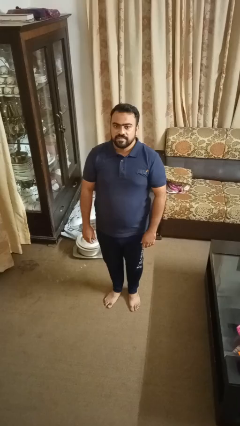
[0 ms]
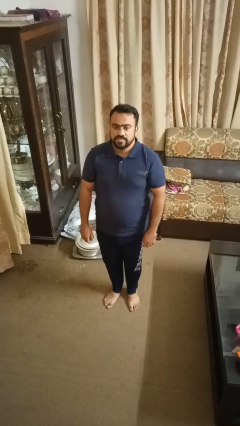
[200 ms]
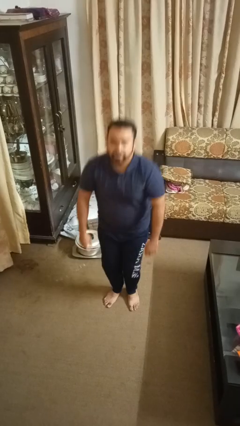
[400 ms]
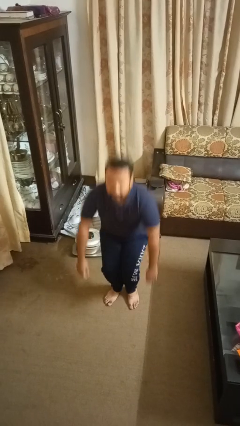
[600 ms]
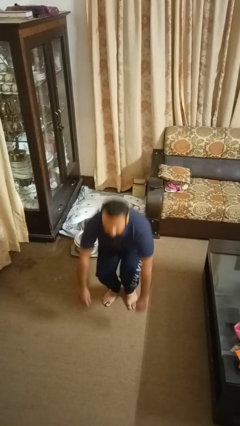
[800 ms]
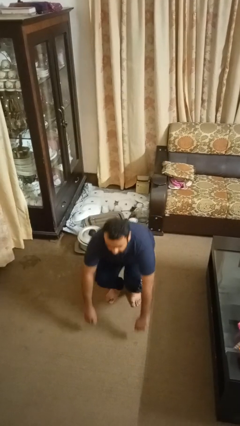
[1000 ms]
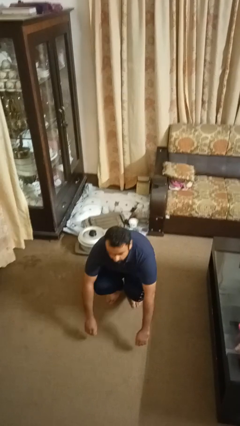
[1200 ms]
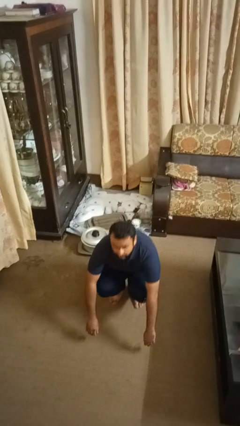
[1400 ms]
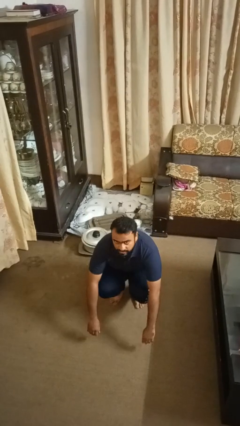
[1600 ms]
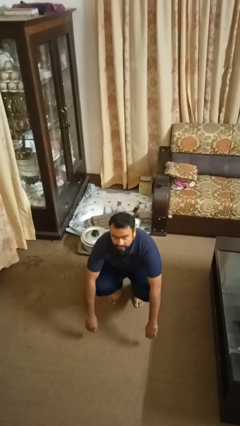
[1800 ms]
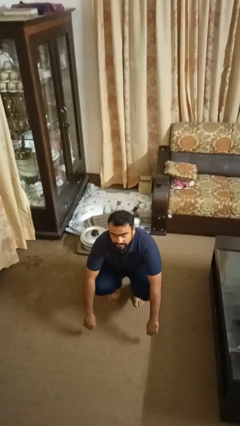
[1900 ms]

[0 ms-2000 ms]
person squats

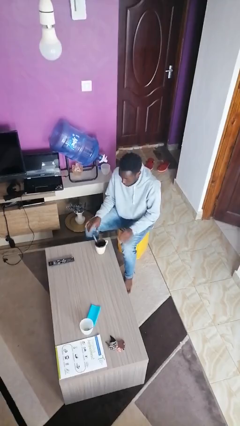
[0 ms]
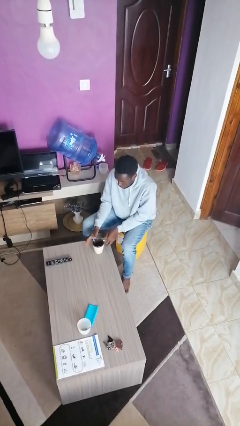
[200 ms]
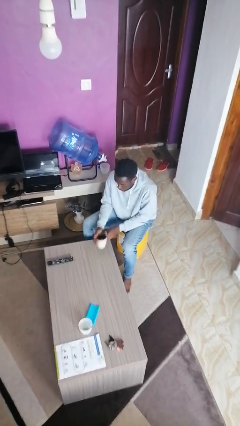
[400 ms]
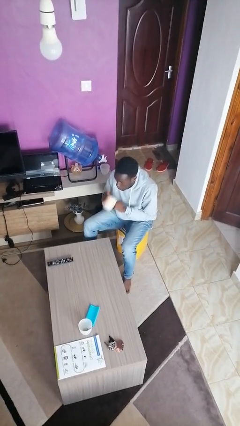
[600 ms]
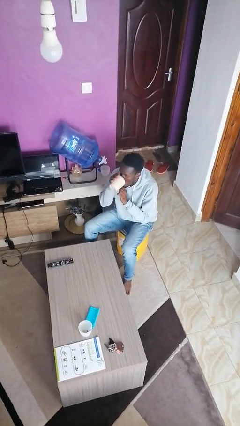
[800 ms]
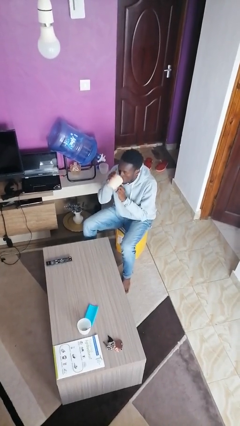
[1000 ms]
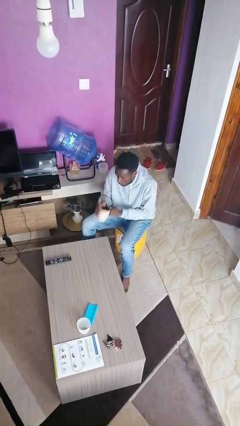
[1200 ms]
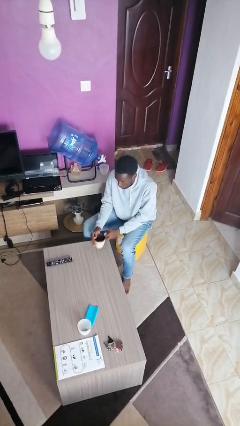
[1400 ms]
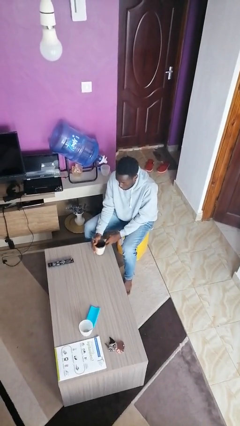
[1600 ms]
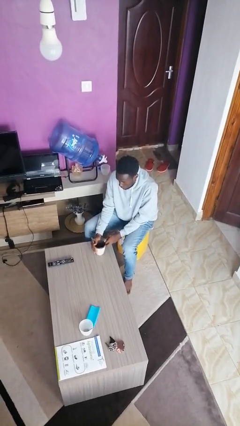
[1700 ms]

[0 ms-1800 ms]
person drinks from mug

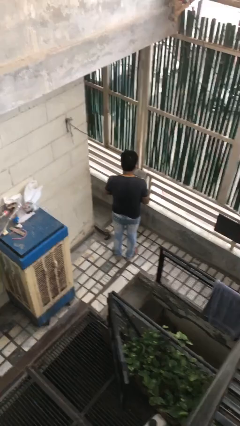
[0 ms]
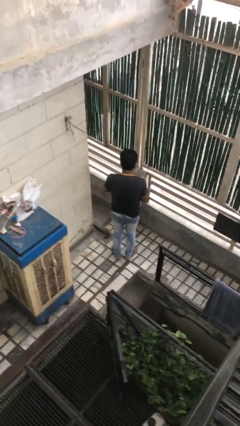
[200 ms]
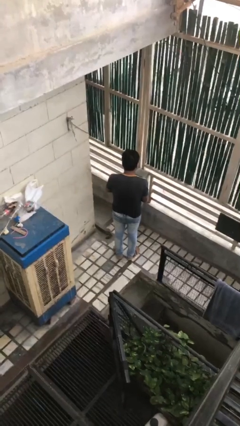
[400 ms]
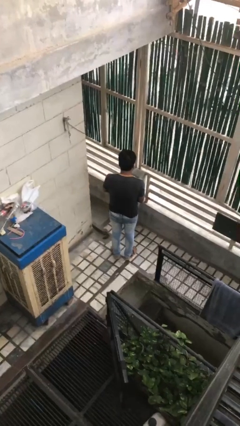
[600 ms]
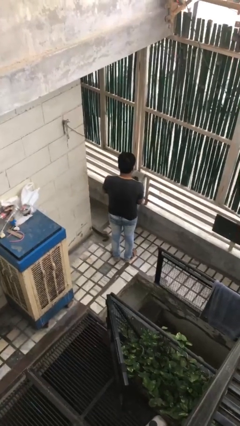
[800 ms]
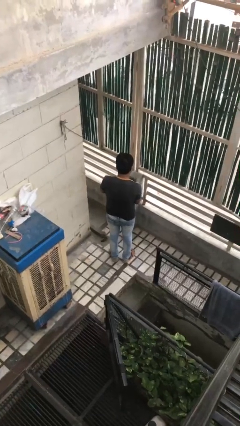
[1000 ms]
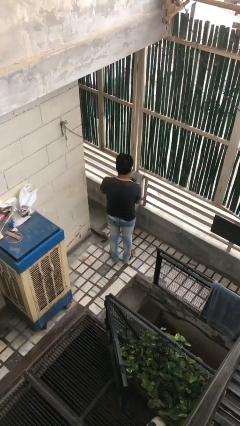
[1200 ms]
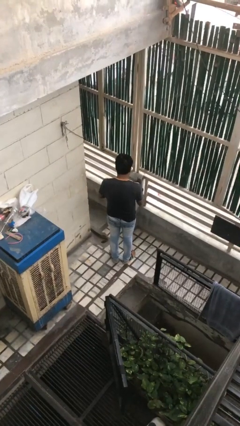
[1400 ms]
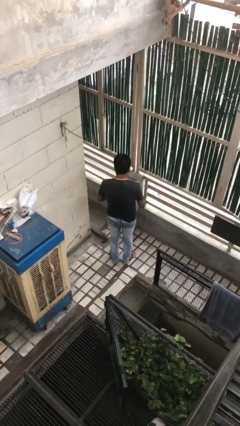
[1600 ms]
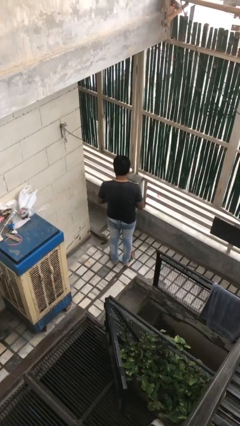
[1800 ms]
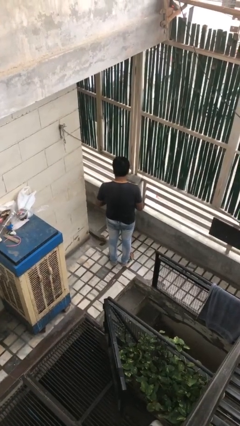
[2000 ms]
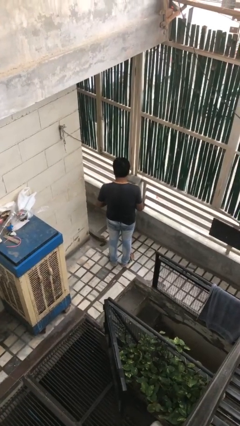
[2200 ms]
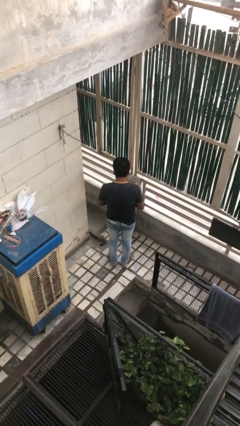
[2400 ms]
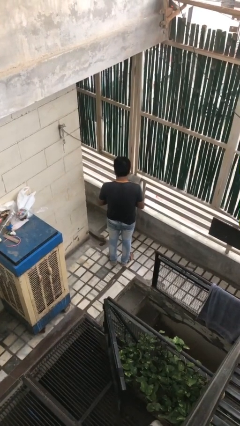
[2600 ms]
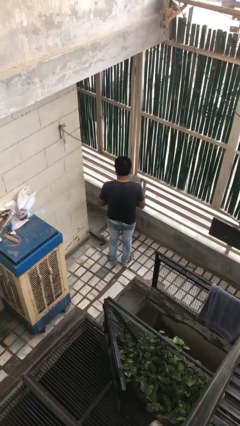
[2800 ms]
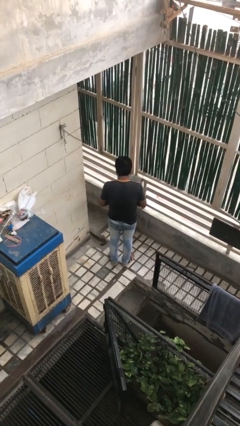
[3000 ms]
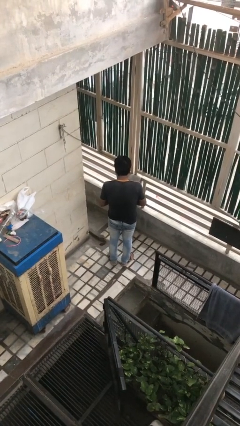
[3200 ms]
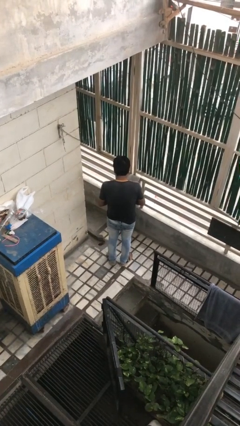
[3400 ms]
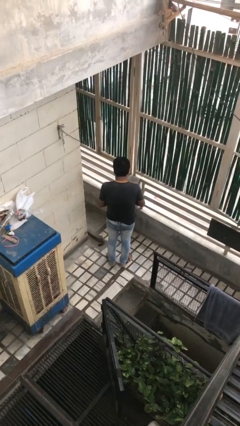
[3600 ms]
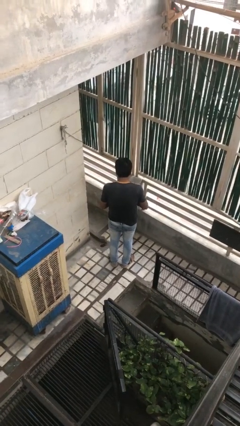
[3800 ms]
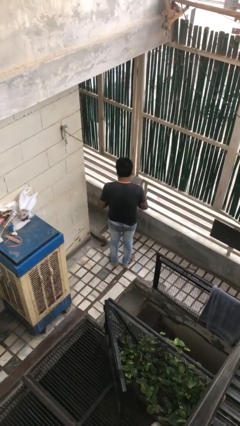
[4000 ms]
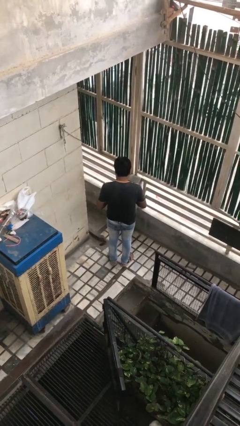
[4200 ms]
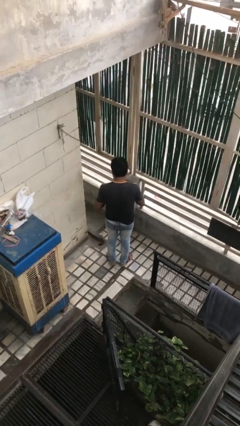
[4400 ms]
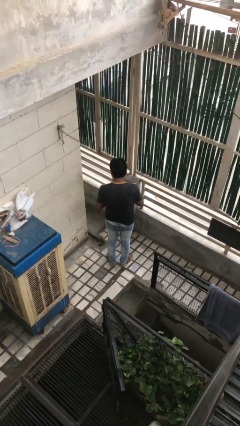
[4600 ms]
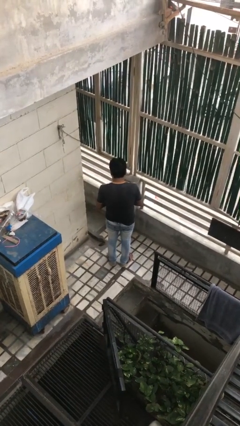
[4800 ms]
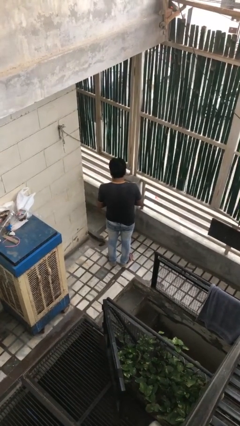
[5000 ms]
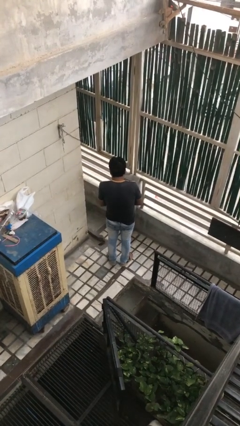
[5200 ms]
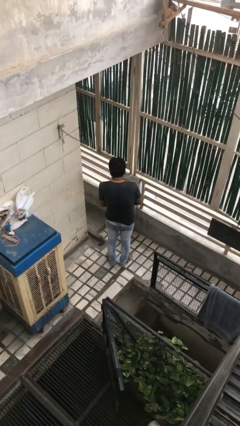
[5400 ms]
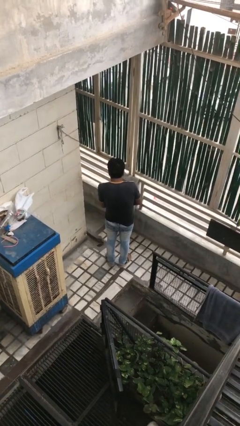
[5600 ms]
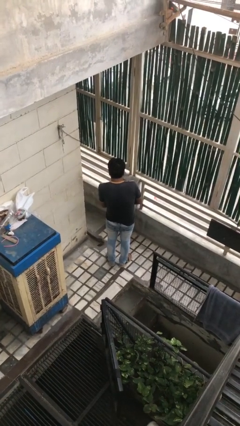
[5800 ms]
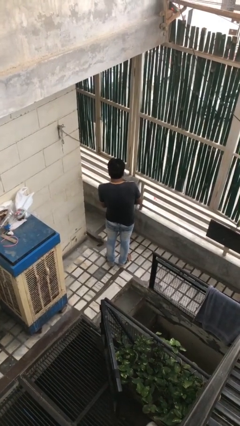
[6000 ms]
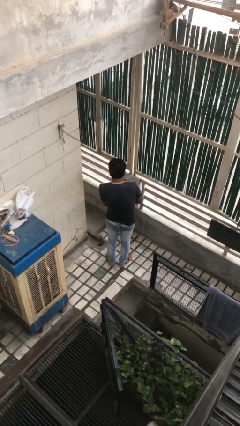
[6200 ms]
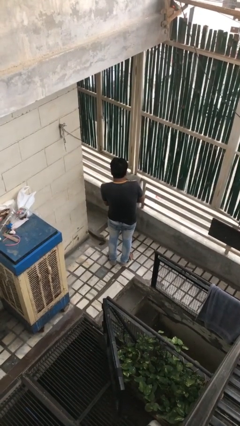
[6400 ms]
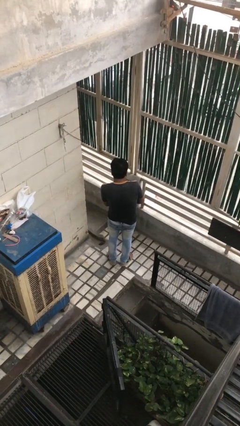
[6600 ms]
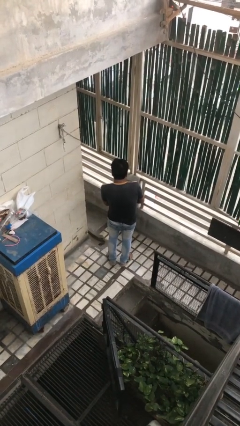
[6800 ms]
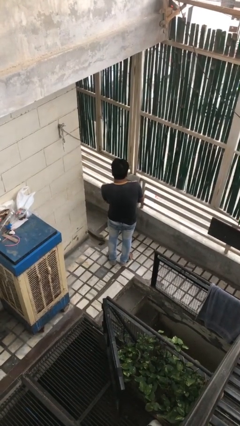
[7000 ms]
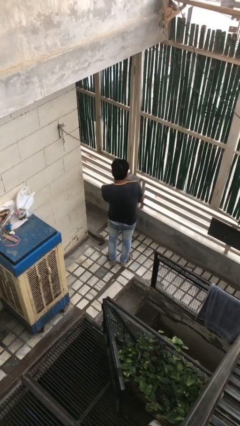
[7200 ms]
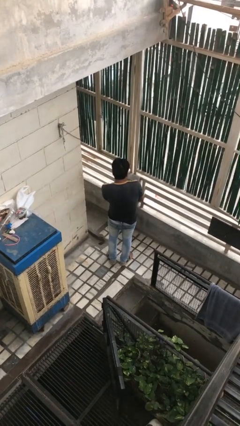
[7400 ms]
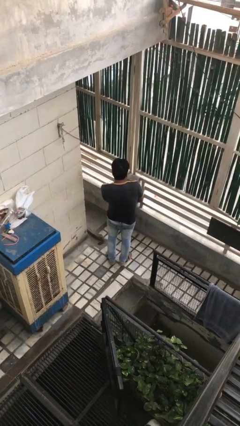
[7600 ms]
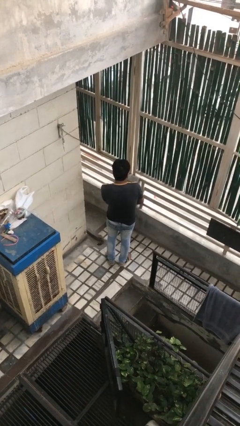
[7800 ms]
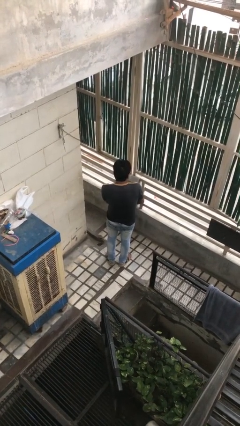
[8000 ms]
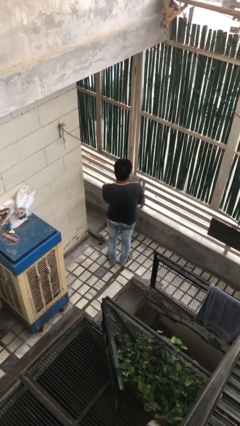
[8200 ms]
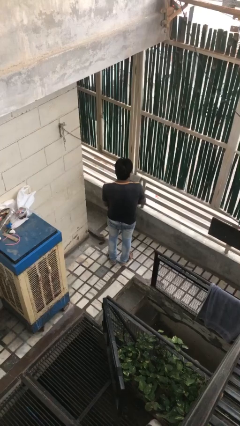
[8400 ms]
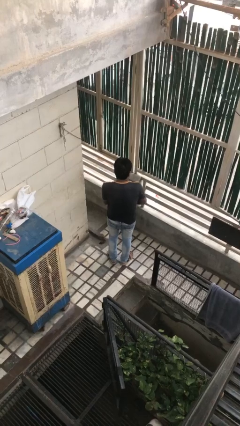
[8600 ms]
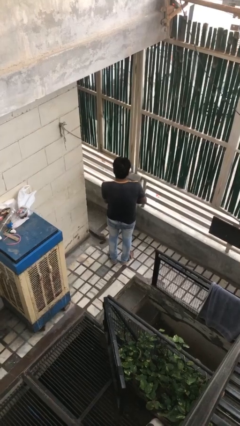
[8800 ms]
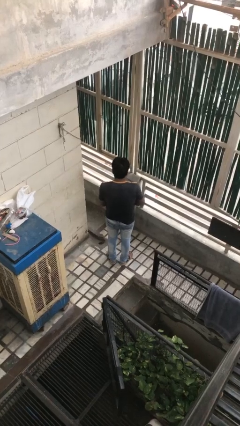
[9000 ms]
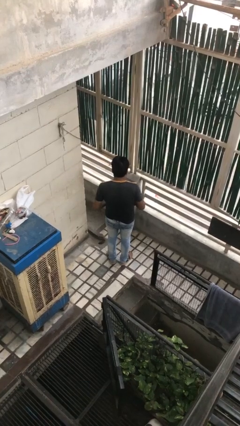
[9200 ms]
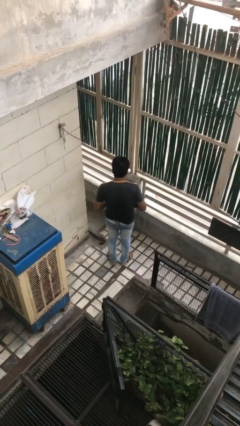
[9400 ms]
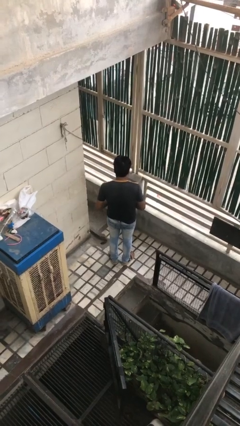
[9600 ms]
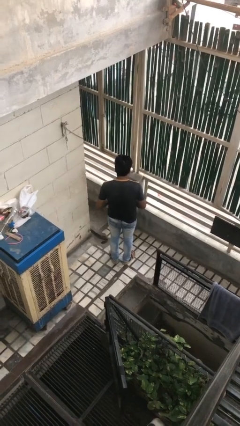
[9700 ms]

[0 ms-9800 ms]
person puts on gloves

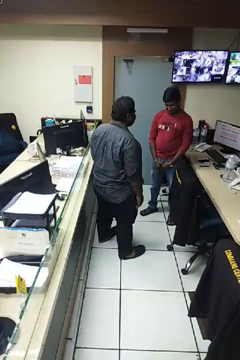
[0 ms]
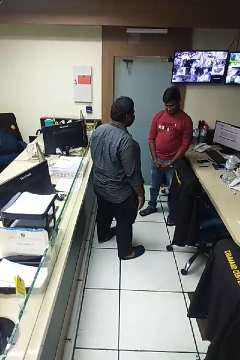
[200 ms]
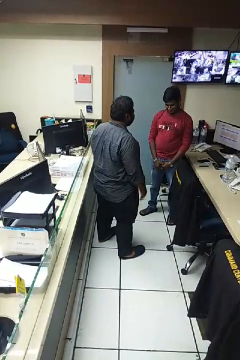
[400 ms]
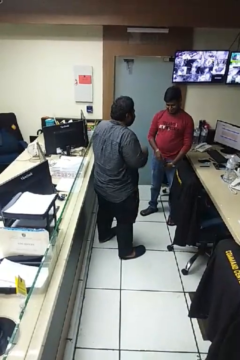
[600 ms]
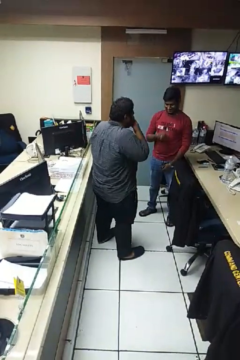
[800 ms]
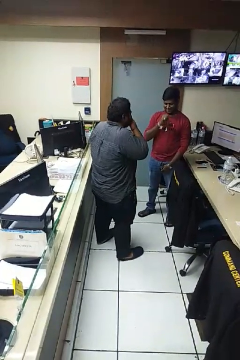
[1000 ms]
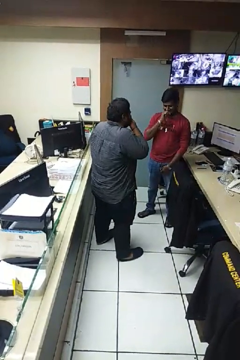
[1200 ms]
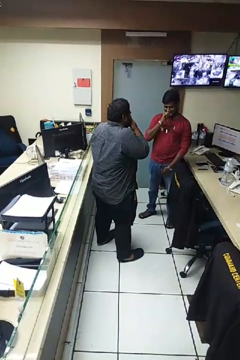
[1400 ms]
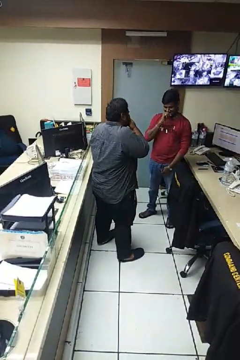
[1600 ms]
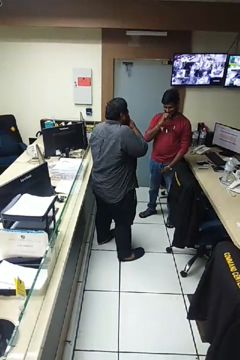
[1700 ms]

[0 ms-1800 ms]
person laughs with person

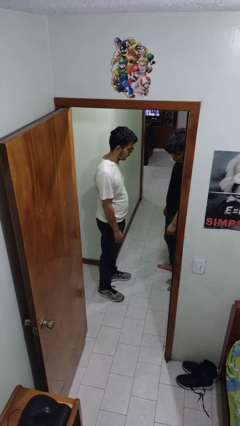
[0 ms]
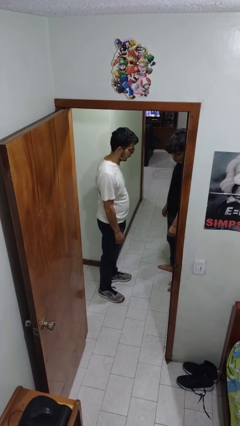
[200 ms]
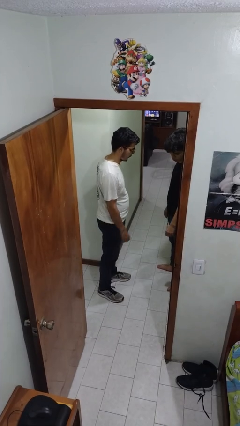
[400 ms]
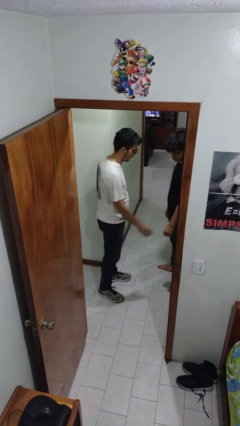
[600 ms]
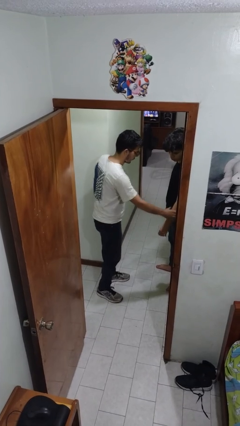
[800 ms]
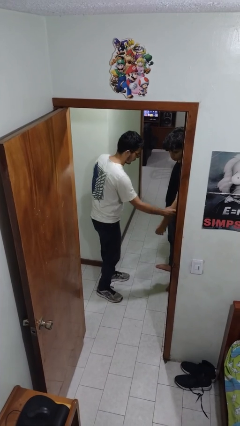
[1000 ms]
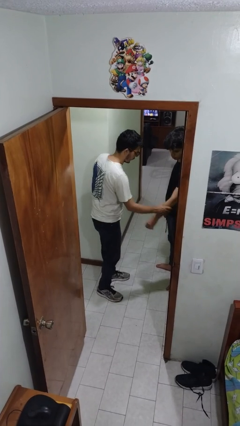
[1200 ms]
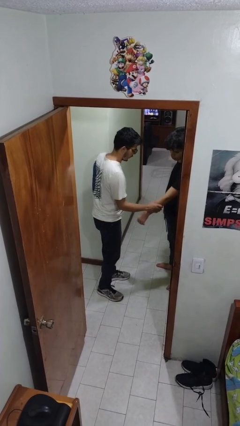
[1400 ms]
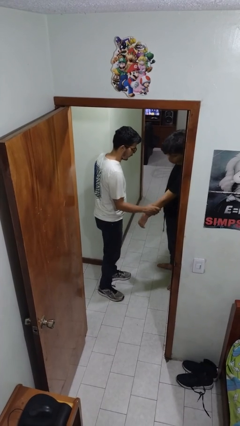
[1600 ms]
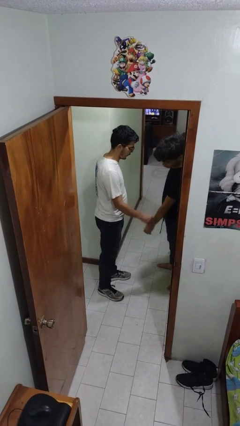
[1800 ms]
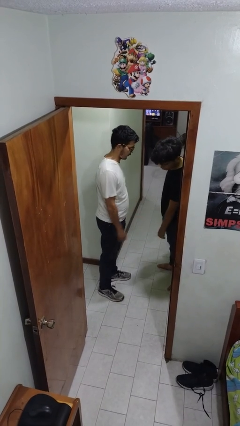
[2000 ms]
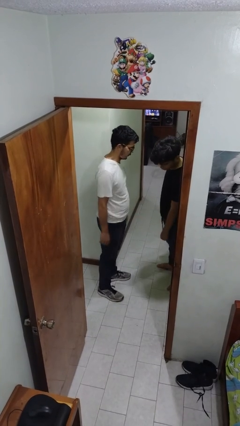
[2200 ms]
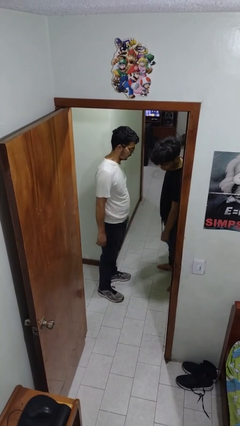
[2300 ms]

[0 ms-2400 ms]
person grabs person by forearm

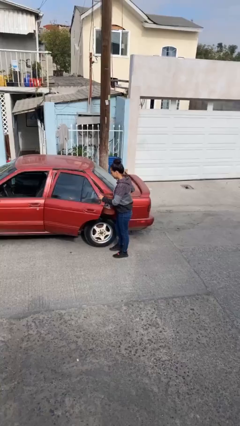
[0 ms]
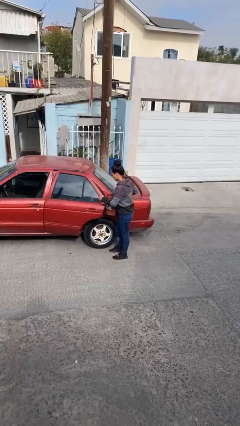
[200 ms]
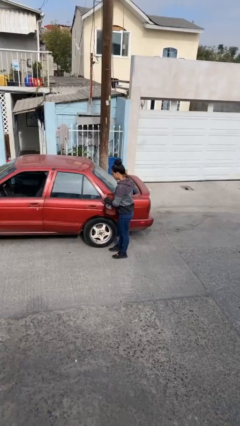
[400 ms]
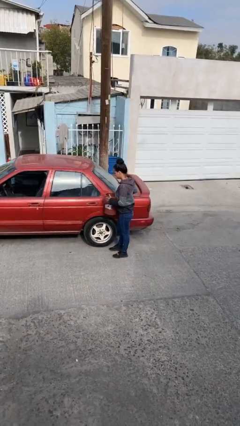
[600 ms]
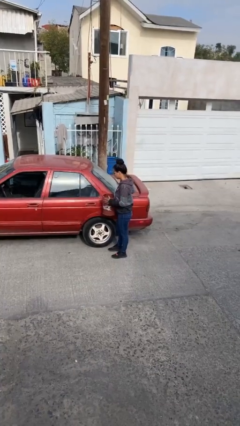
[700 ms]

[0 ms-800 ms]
person closes car door
